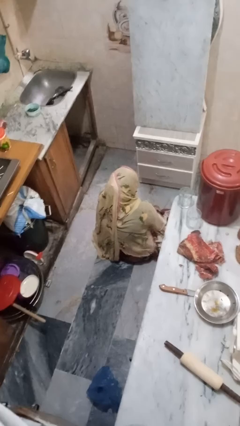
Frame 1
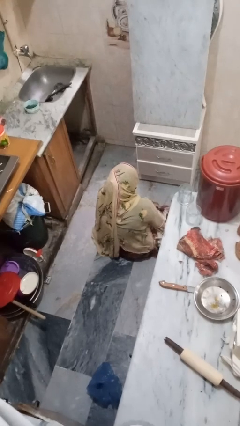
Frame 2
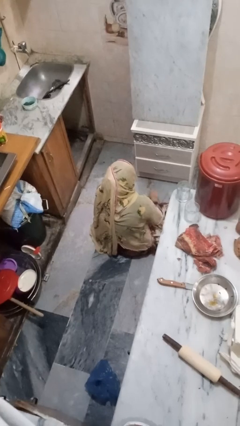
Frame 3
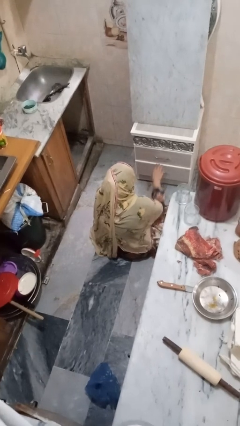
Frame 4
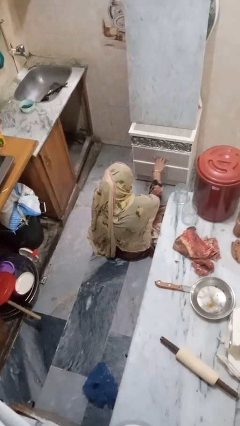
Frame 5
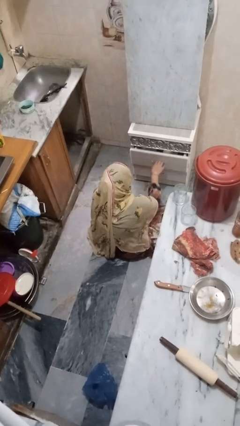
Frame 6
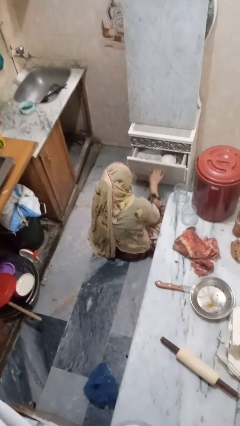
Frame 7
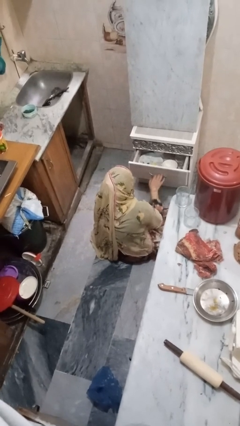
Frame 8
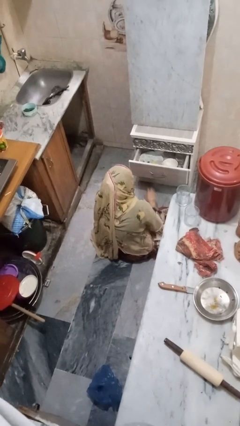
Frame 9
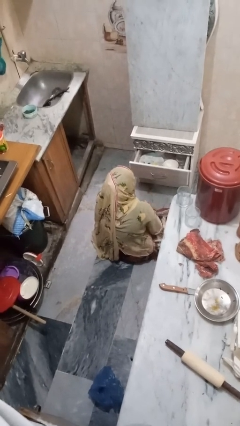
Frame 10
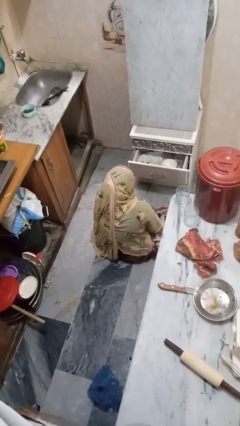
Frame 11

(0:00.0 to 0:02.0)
person opens kitchen drawer

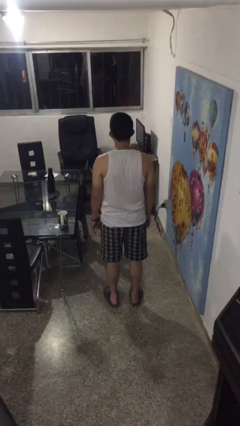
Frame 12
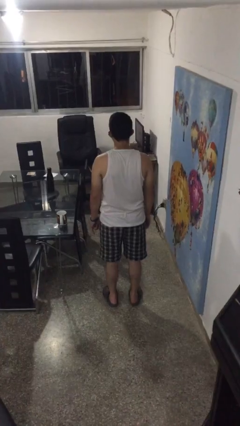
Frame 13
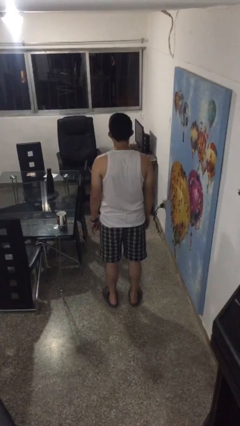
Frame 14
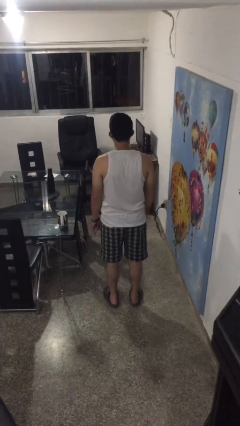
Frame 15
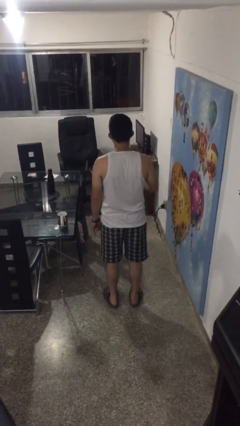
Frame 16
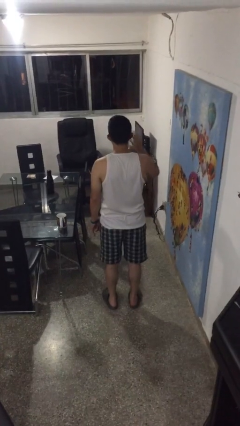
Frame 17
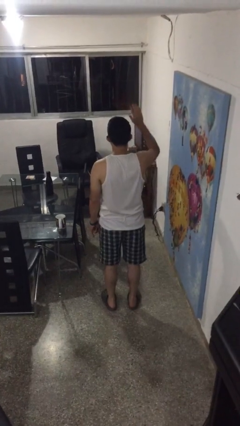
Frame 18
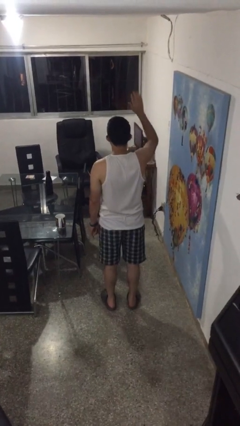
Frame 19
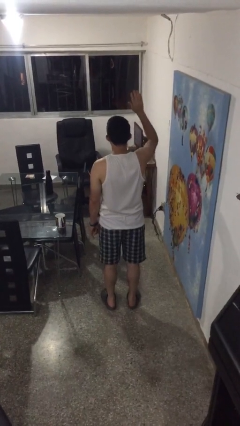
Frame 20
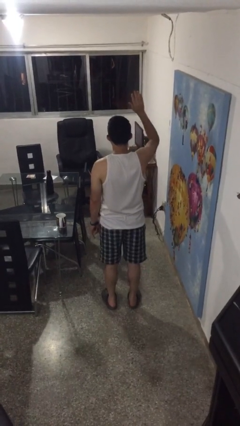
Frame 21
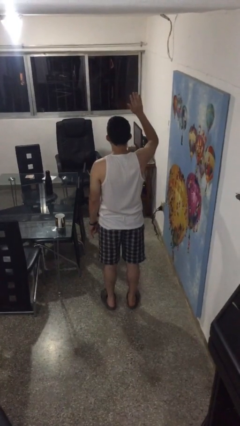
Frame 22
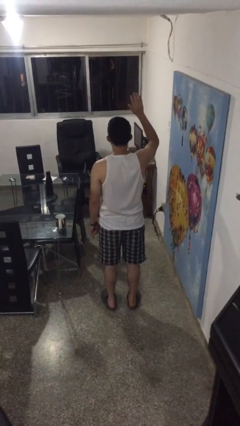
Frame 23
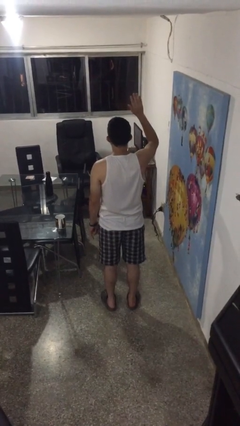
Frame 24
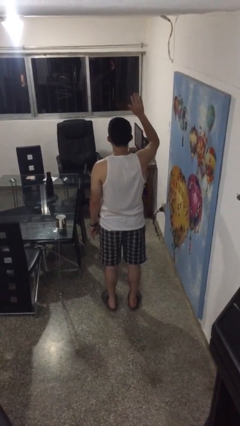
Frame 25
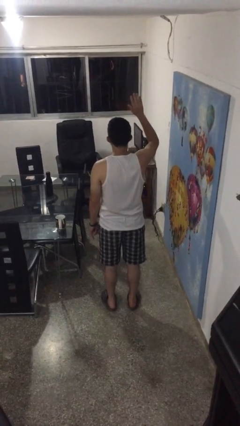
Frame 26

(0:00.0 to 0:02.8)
person gestures raise hand

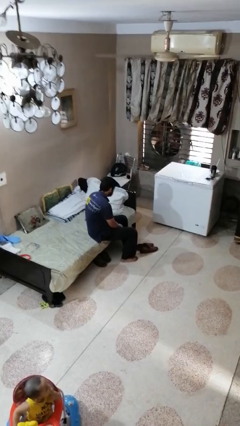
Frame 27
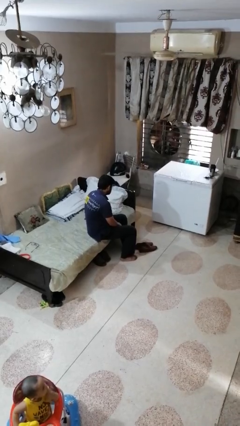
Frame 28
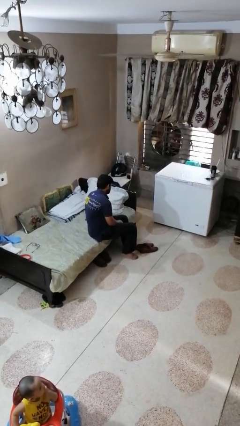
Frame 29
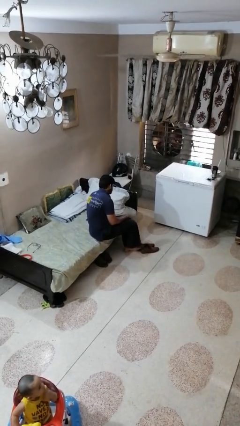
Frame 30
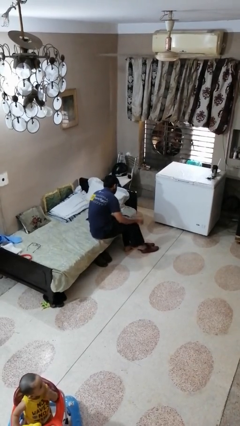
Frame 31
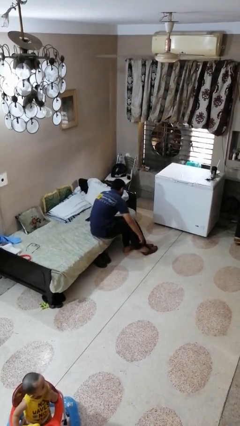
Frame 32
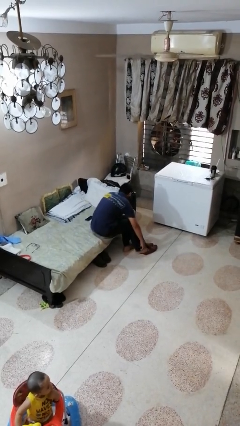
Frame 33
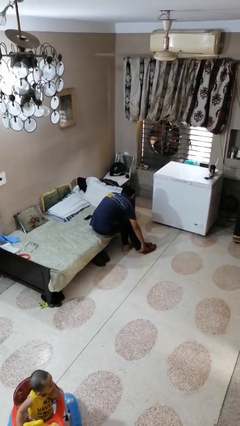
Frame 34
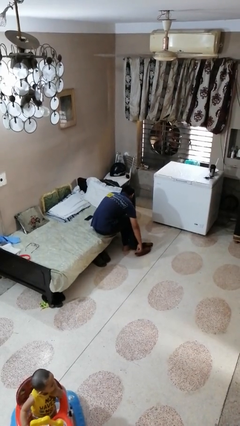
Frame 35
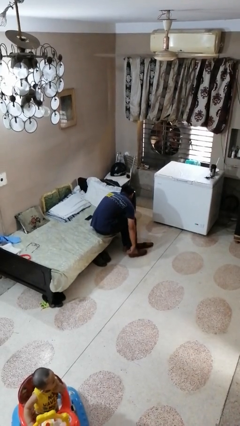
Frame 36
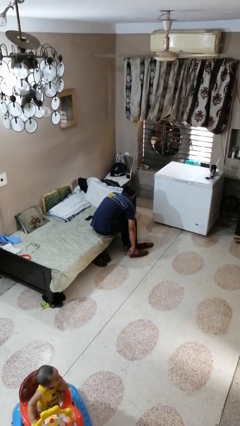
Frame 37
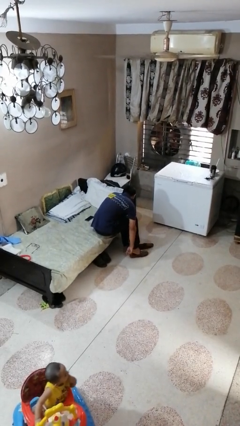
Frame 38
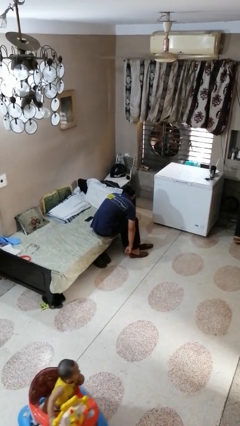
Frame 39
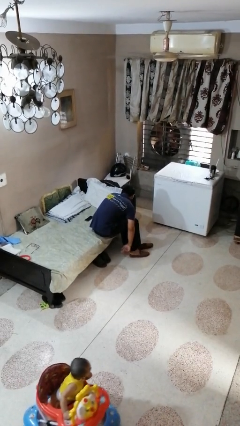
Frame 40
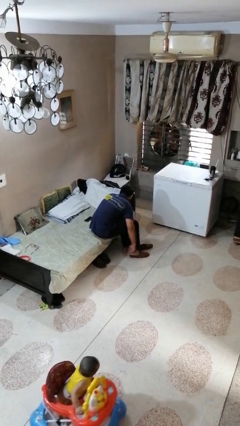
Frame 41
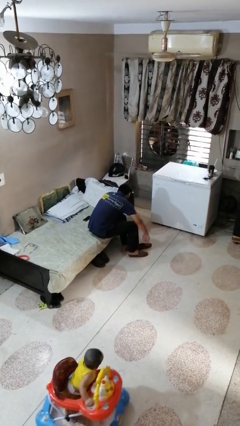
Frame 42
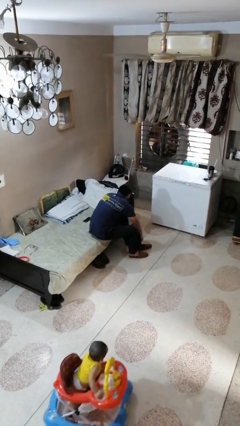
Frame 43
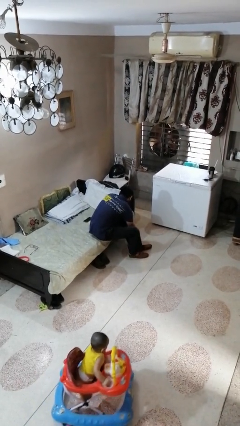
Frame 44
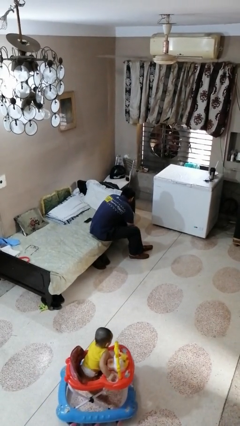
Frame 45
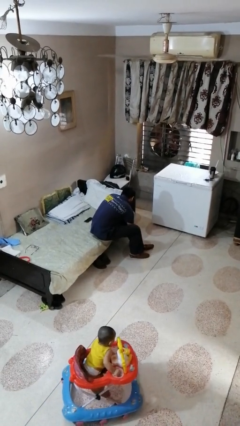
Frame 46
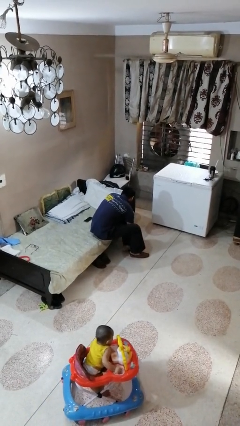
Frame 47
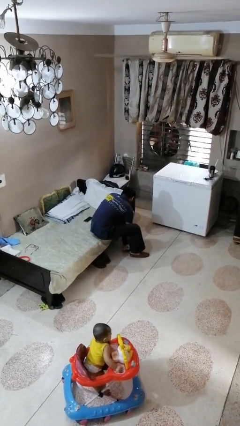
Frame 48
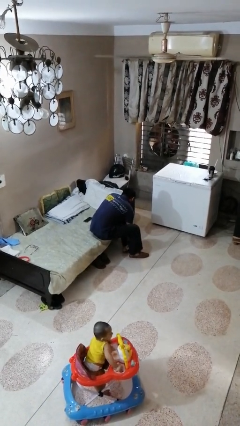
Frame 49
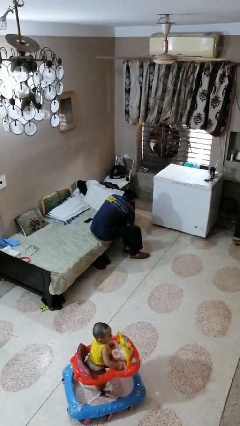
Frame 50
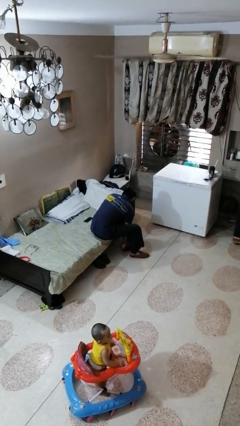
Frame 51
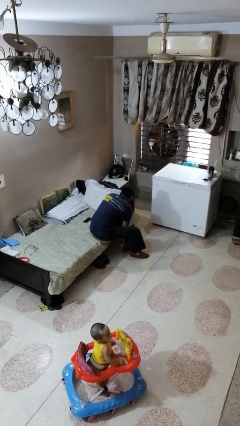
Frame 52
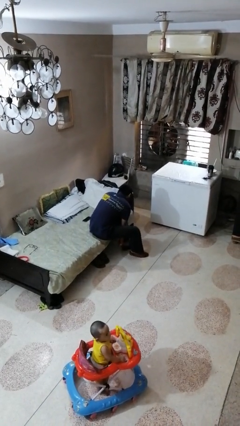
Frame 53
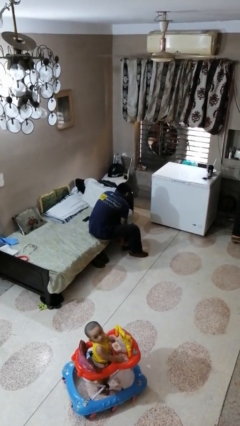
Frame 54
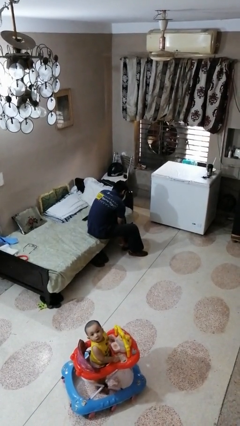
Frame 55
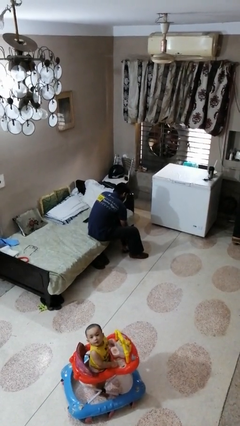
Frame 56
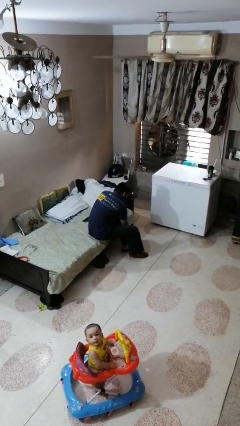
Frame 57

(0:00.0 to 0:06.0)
person puts on shoes

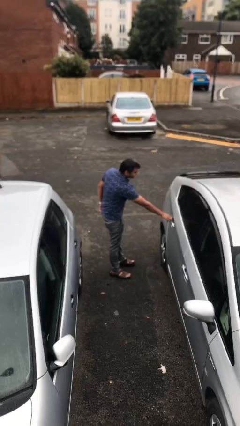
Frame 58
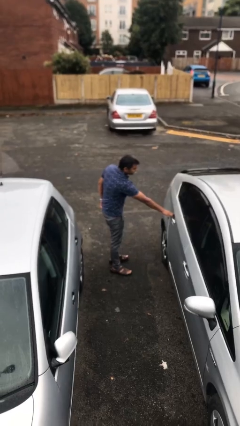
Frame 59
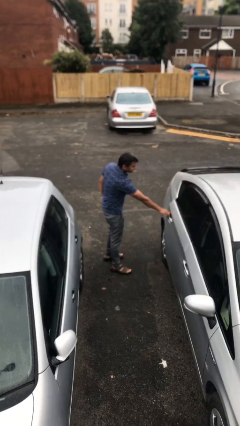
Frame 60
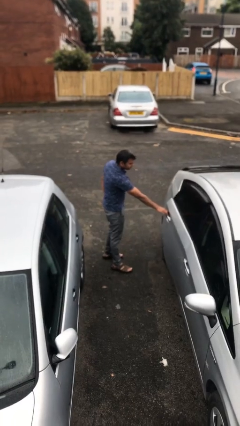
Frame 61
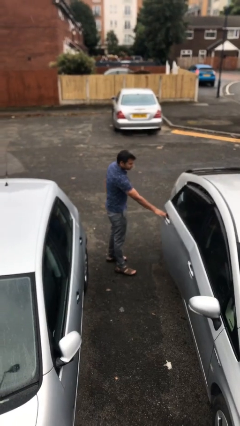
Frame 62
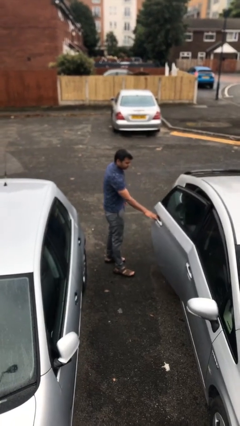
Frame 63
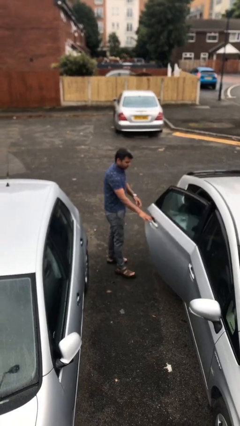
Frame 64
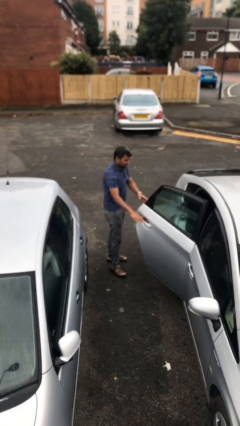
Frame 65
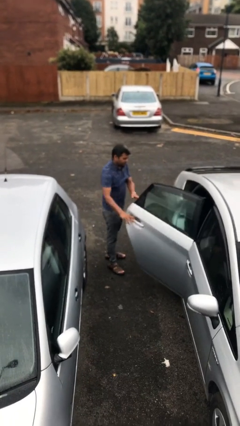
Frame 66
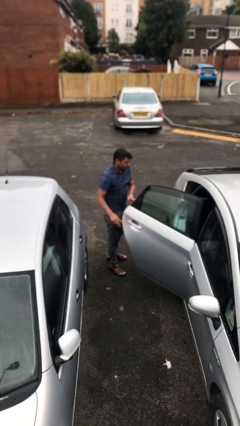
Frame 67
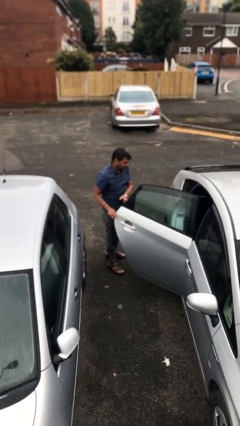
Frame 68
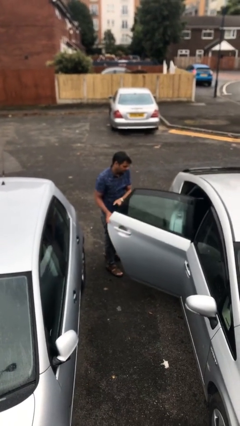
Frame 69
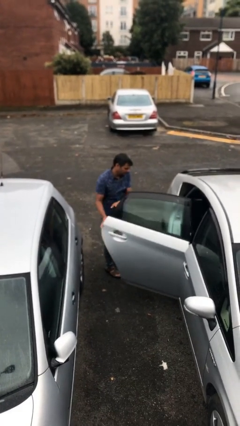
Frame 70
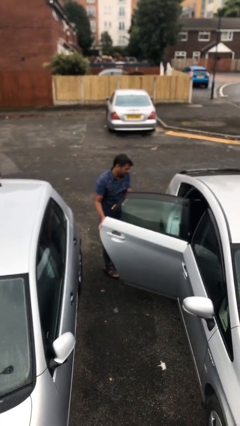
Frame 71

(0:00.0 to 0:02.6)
person opens car door

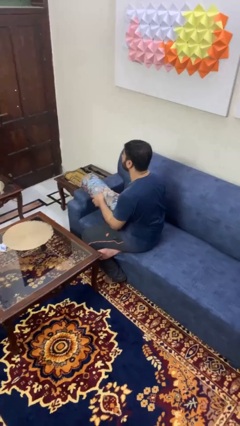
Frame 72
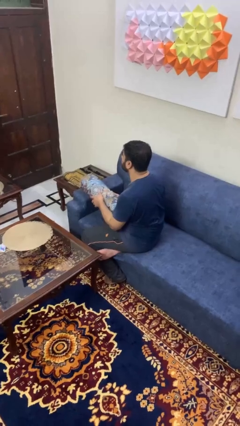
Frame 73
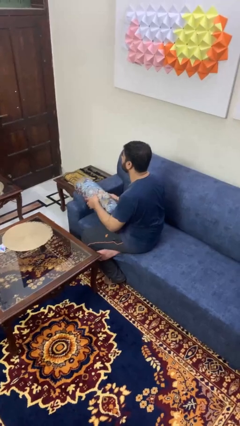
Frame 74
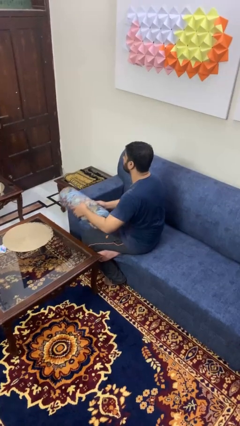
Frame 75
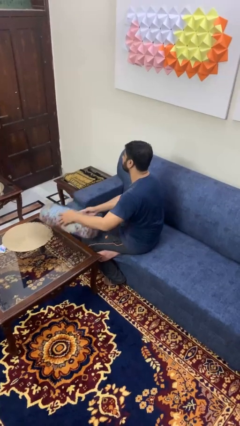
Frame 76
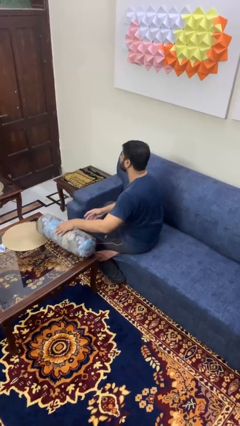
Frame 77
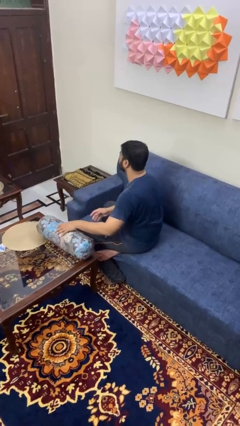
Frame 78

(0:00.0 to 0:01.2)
person throws object on table

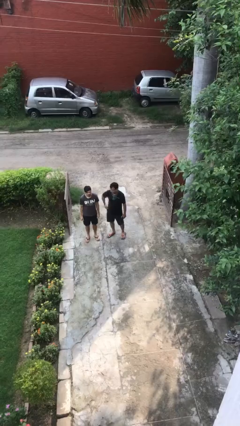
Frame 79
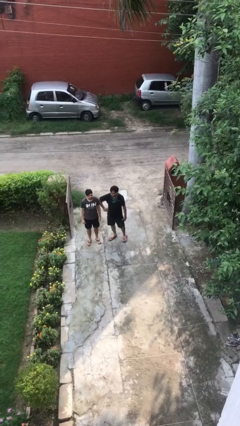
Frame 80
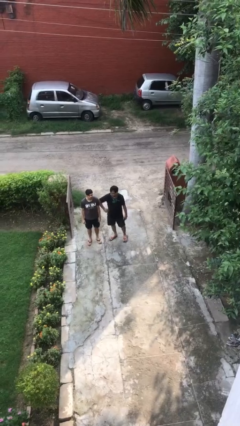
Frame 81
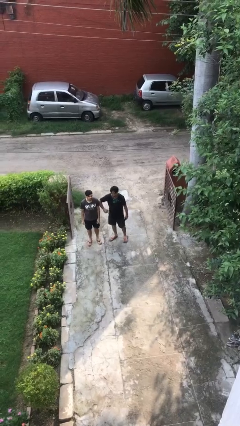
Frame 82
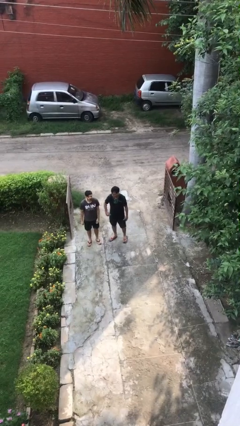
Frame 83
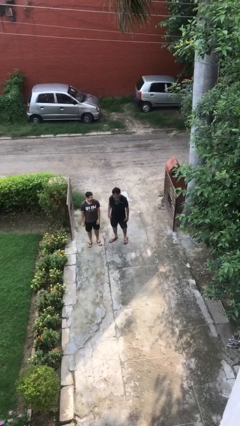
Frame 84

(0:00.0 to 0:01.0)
person nudges person with elbow

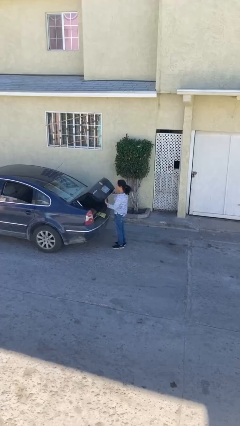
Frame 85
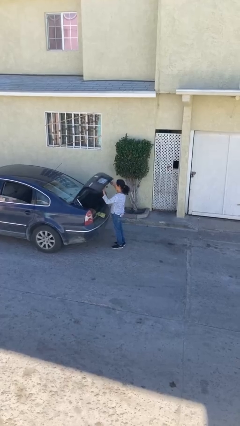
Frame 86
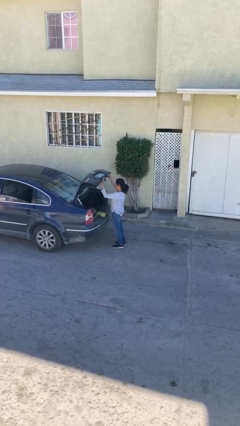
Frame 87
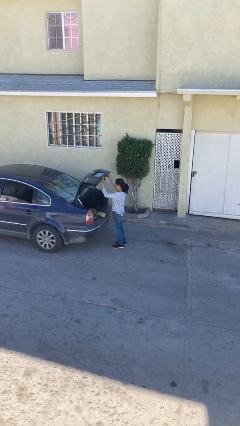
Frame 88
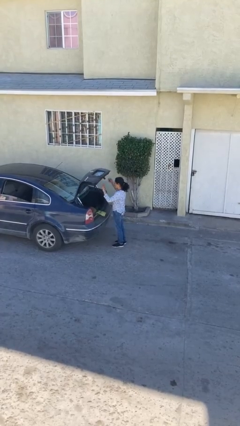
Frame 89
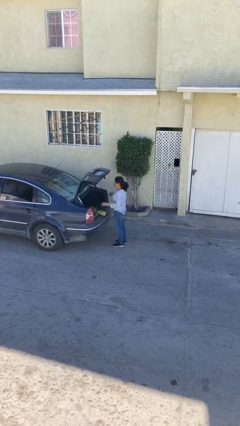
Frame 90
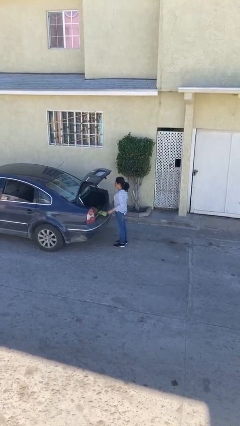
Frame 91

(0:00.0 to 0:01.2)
person opens car trunk

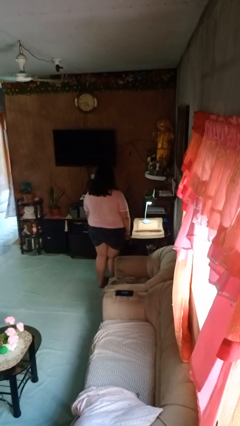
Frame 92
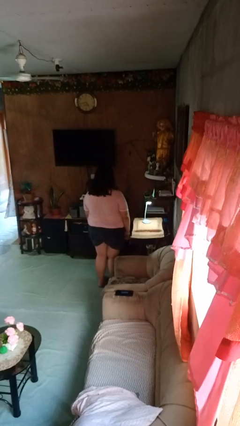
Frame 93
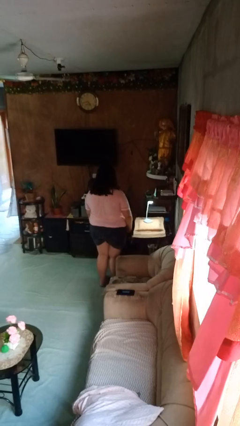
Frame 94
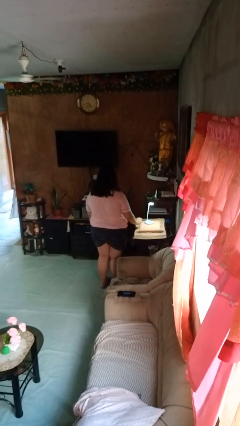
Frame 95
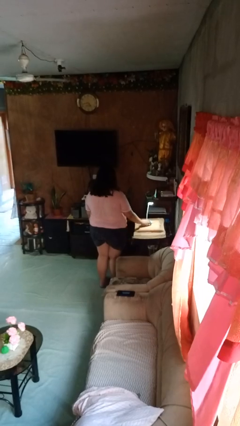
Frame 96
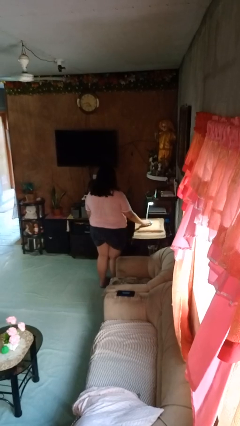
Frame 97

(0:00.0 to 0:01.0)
person turns off lamp
